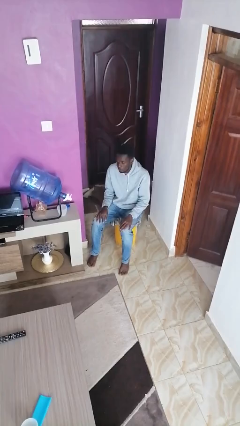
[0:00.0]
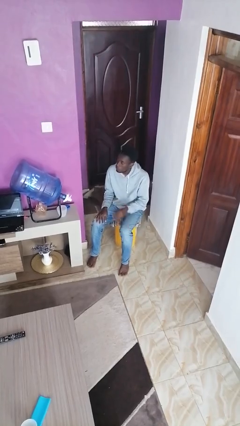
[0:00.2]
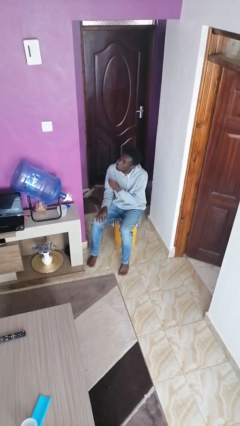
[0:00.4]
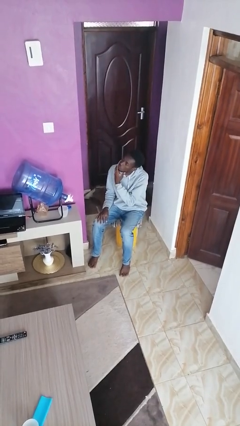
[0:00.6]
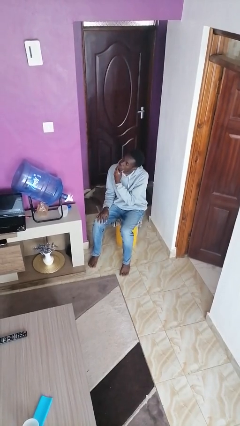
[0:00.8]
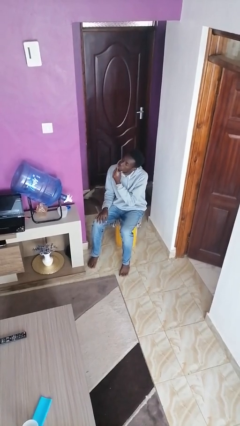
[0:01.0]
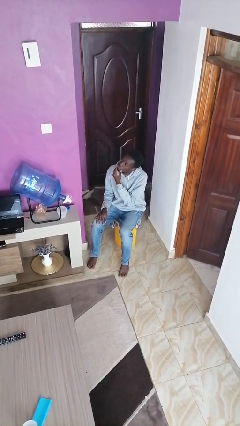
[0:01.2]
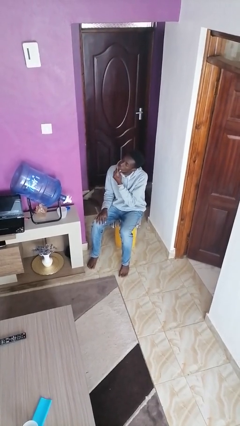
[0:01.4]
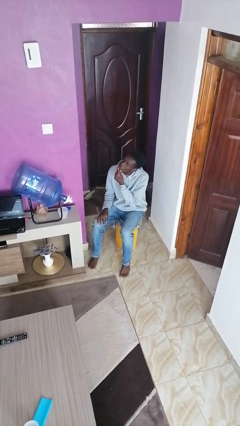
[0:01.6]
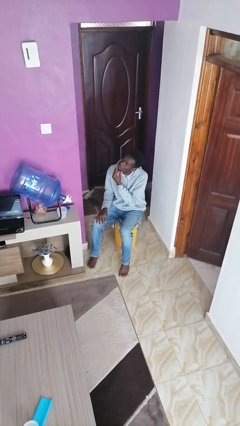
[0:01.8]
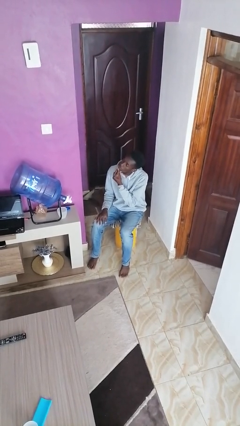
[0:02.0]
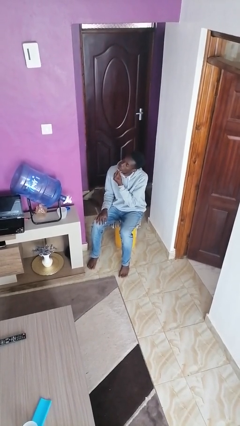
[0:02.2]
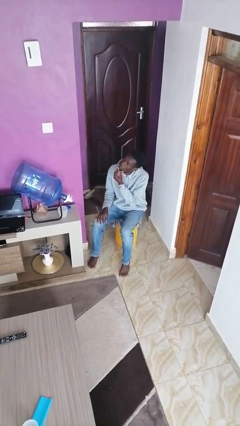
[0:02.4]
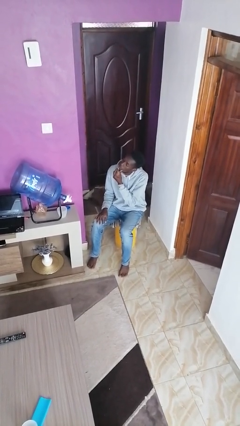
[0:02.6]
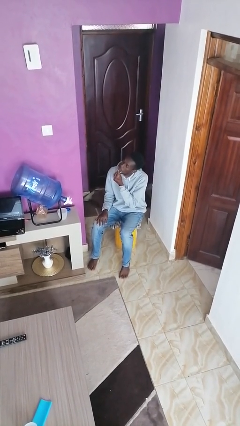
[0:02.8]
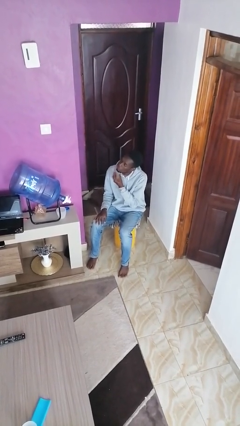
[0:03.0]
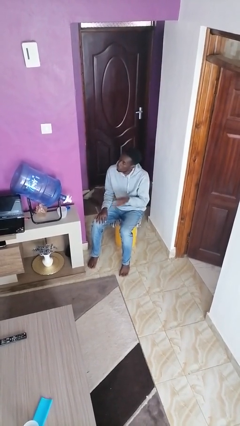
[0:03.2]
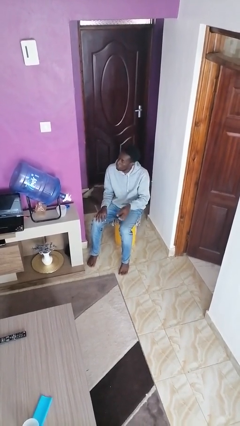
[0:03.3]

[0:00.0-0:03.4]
person strokes chin

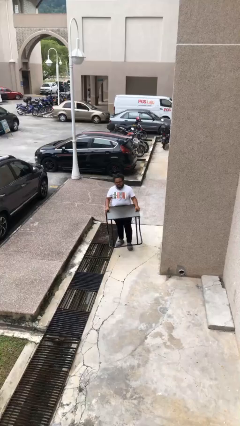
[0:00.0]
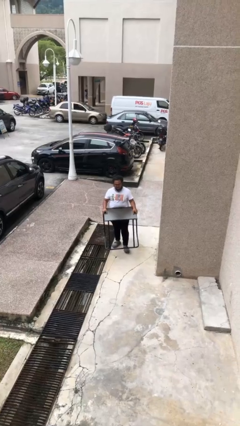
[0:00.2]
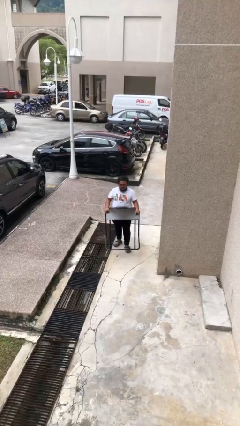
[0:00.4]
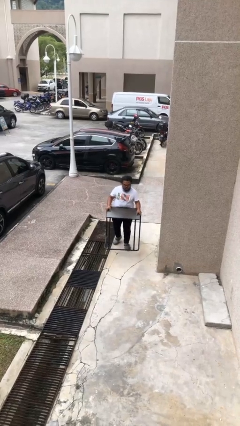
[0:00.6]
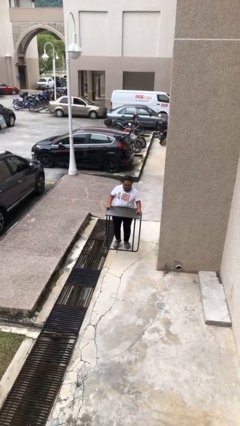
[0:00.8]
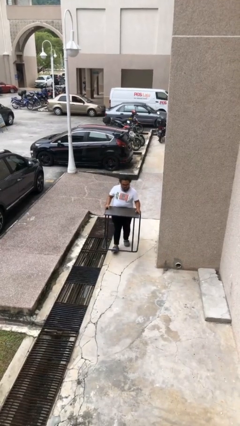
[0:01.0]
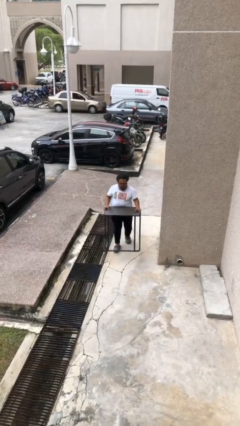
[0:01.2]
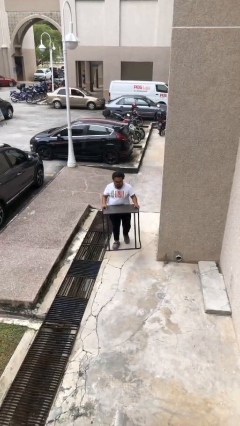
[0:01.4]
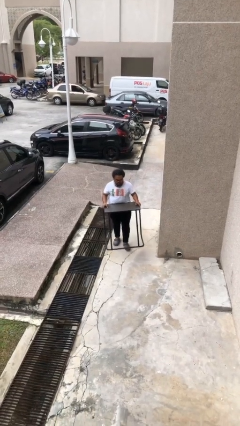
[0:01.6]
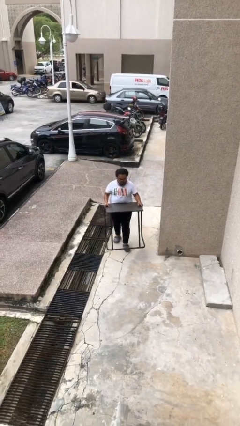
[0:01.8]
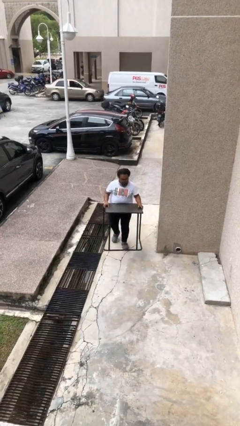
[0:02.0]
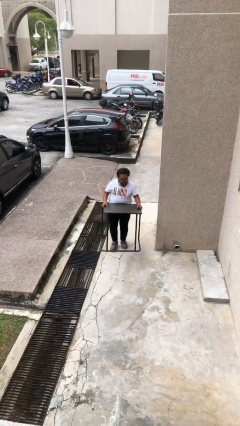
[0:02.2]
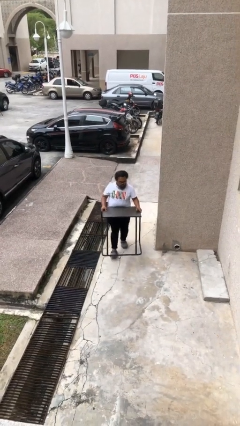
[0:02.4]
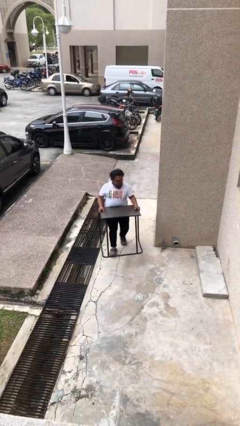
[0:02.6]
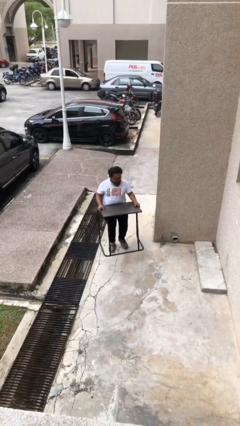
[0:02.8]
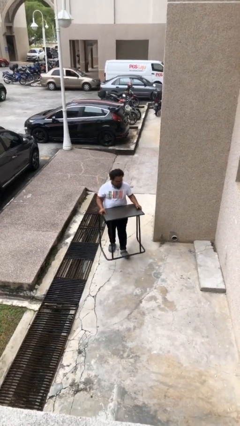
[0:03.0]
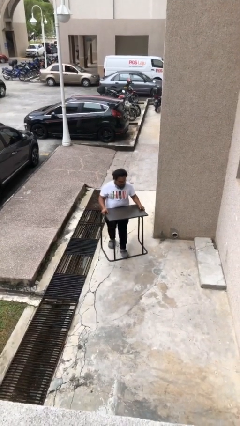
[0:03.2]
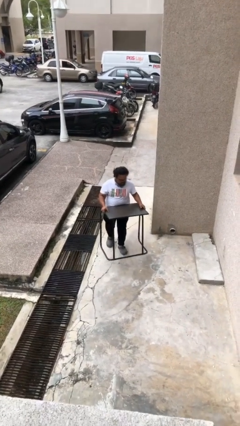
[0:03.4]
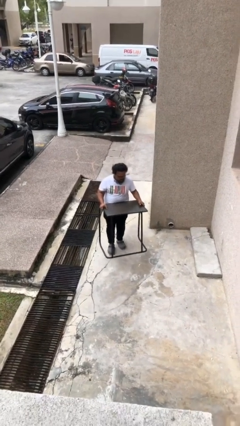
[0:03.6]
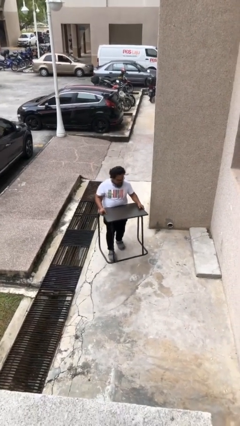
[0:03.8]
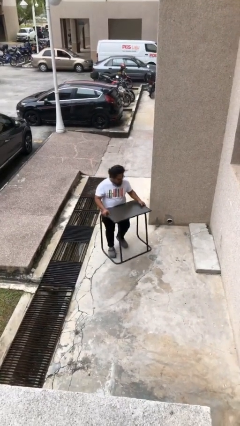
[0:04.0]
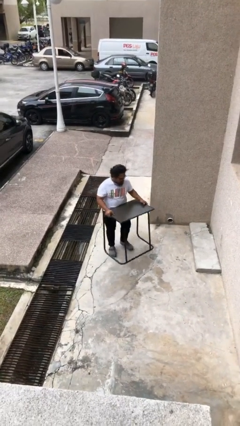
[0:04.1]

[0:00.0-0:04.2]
person carries heavy object

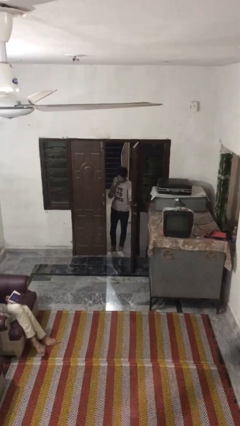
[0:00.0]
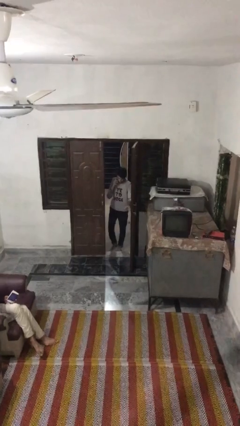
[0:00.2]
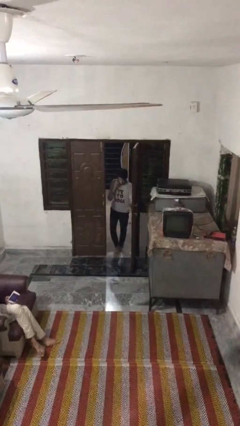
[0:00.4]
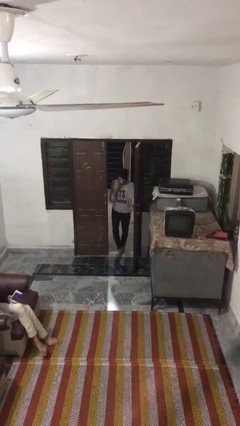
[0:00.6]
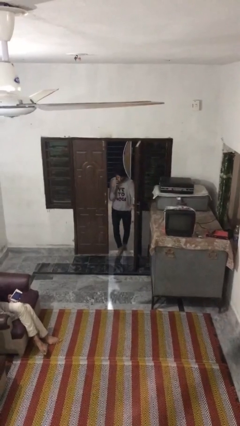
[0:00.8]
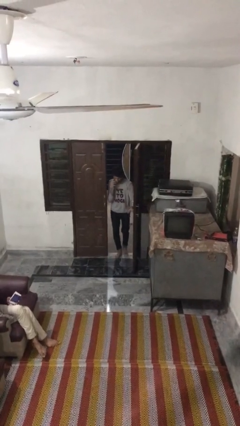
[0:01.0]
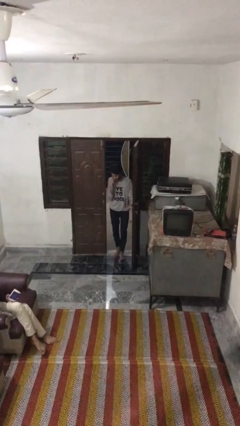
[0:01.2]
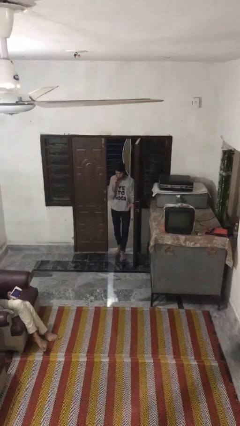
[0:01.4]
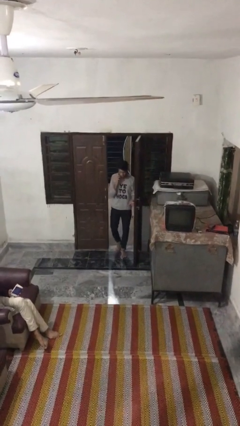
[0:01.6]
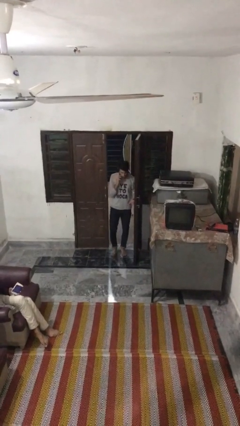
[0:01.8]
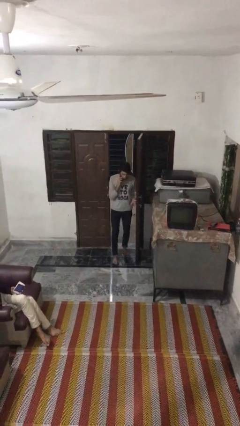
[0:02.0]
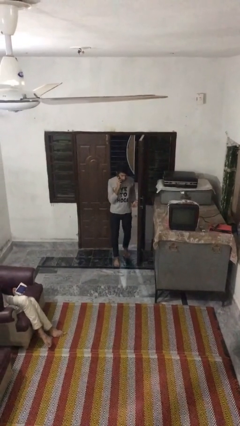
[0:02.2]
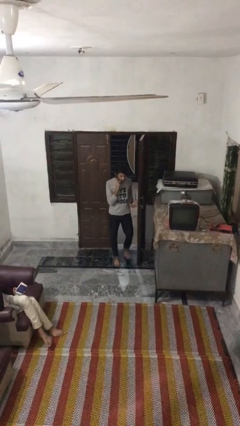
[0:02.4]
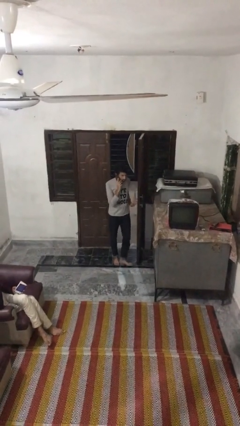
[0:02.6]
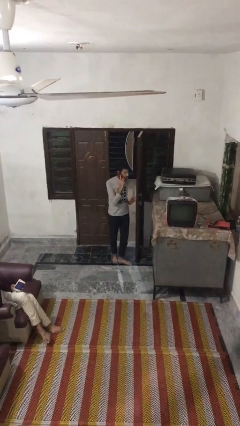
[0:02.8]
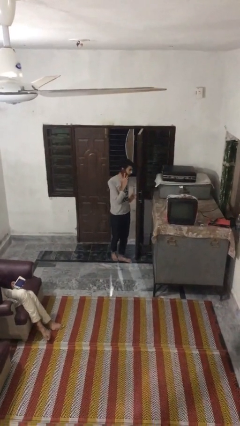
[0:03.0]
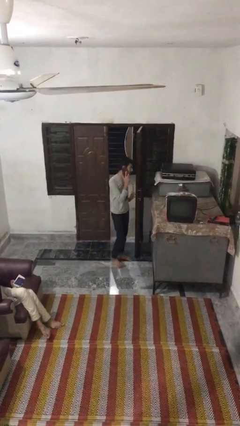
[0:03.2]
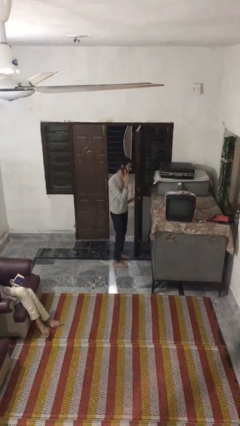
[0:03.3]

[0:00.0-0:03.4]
person enters scene through structure

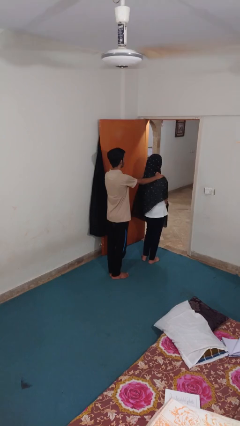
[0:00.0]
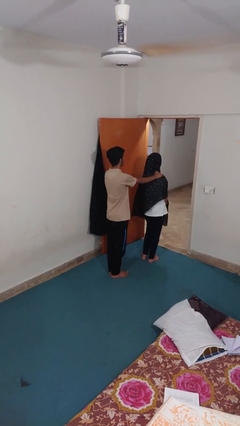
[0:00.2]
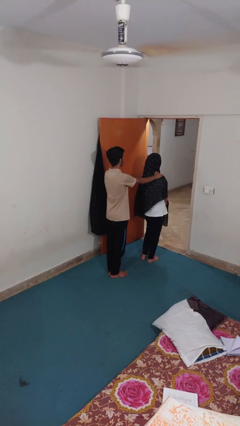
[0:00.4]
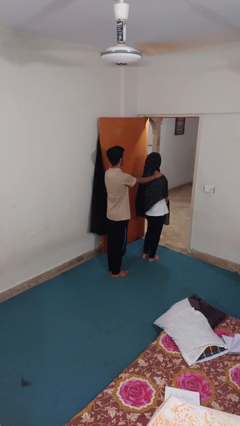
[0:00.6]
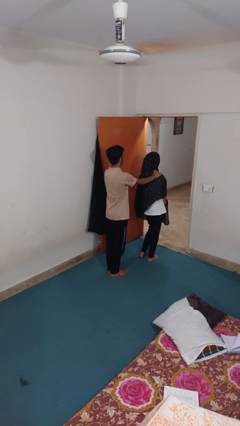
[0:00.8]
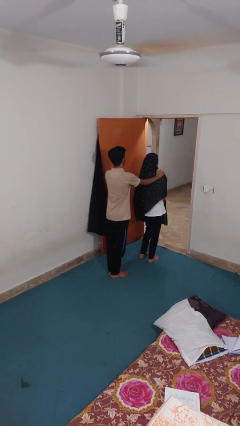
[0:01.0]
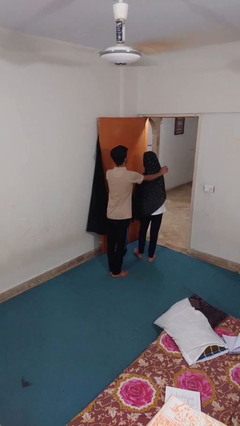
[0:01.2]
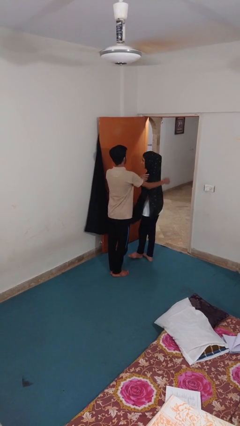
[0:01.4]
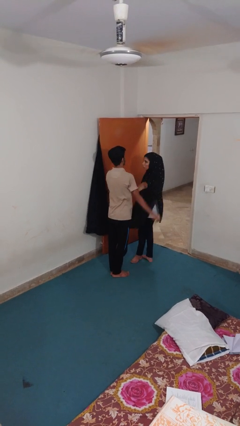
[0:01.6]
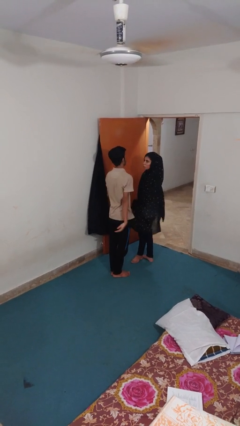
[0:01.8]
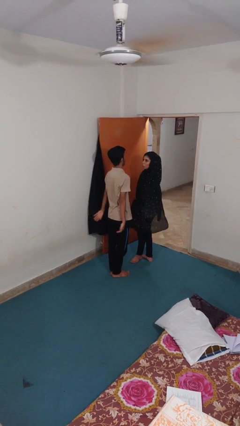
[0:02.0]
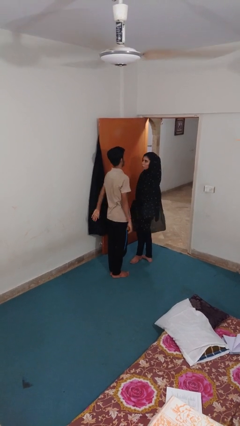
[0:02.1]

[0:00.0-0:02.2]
person spins person around

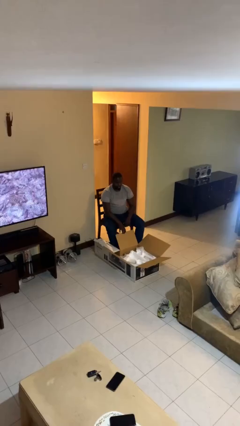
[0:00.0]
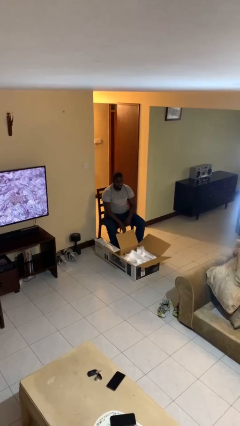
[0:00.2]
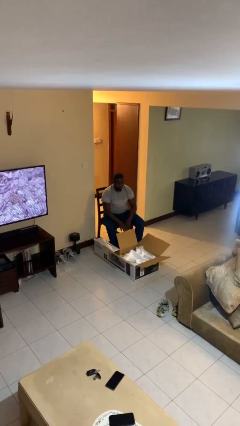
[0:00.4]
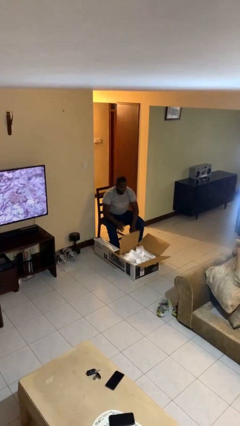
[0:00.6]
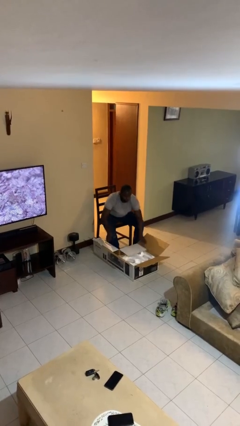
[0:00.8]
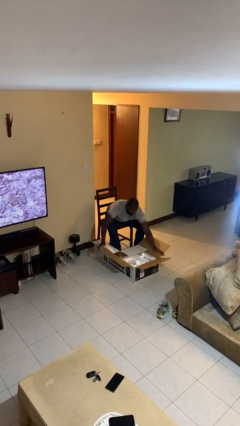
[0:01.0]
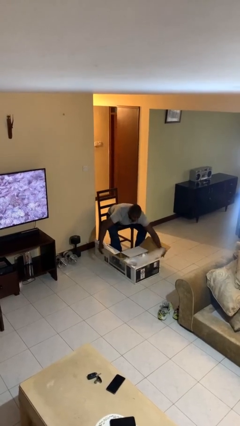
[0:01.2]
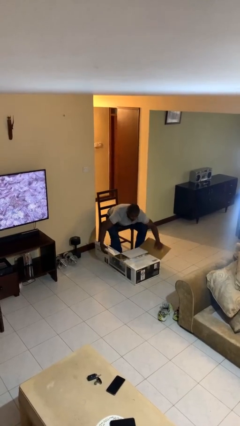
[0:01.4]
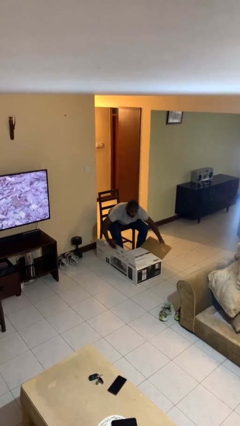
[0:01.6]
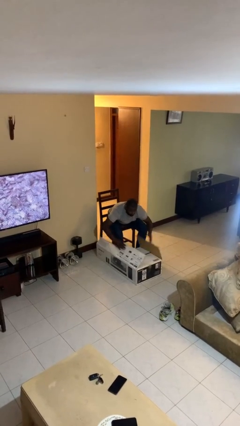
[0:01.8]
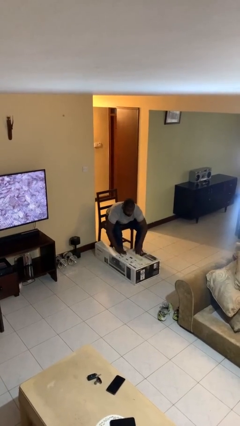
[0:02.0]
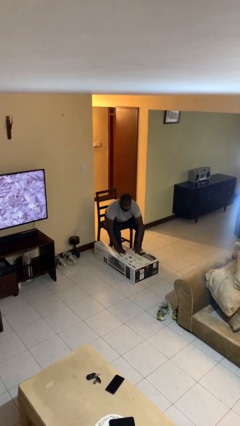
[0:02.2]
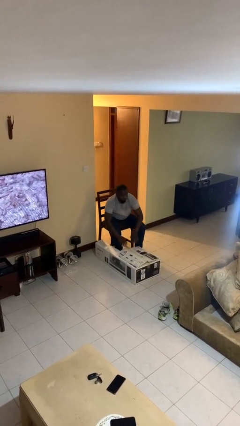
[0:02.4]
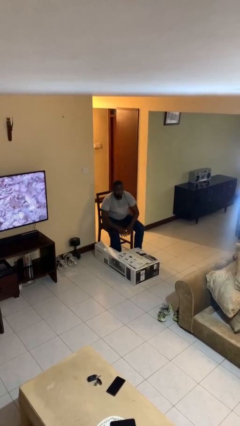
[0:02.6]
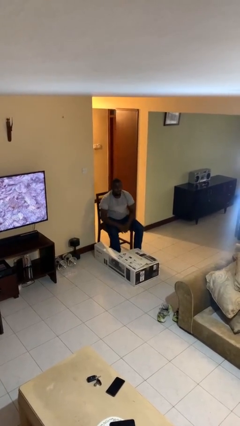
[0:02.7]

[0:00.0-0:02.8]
person closes box

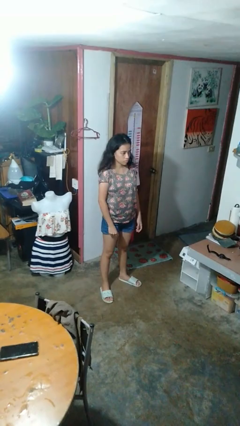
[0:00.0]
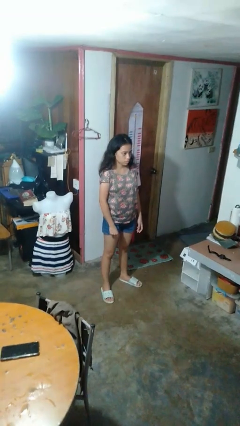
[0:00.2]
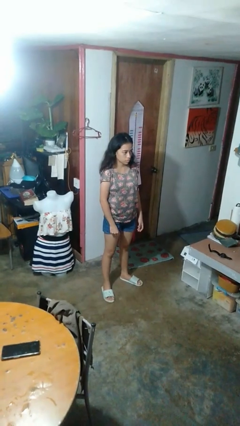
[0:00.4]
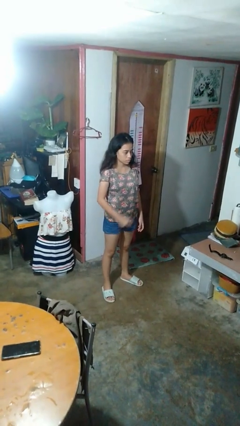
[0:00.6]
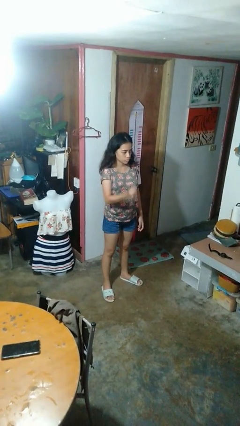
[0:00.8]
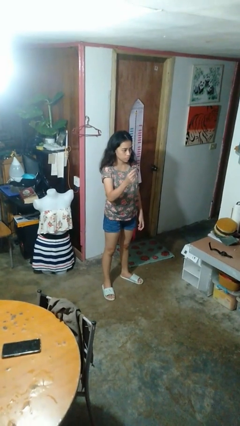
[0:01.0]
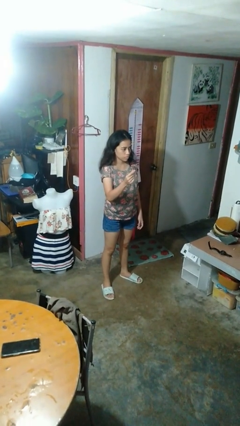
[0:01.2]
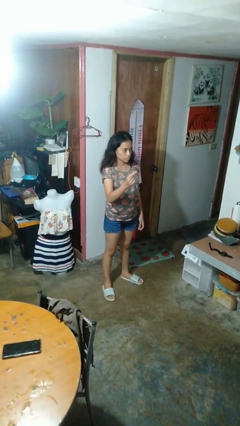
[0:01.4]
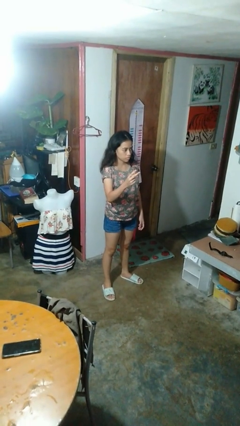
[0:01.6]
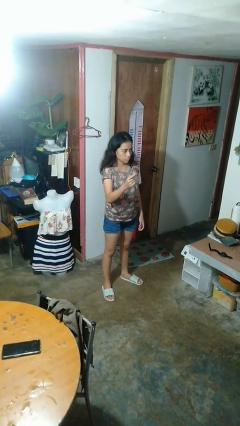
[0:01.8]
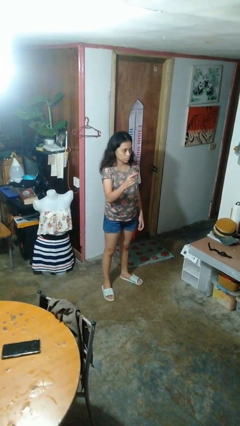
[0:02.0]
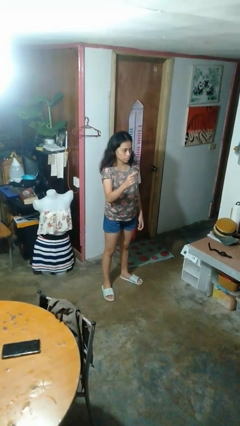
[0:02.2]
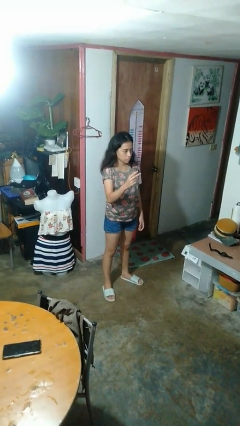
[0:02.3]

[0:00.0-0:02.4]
person snaps fingers
